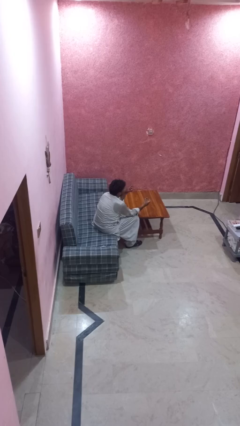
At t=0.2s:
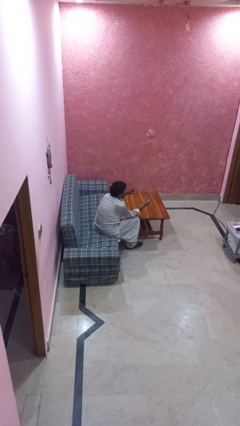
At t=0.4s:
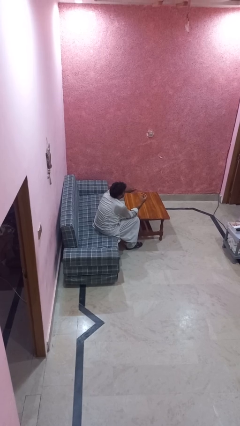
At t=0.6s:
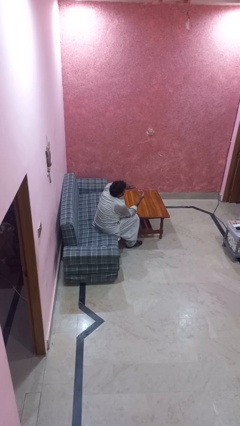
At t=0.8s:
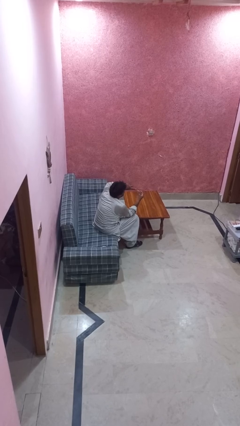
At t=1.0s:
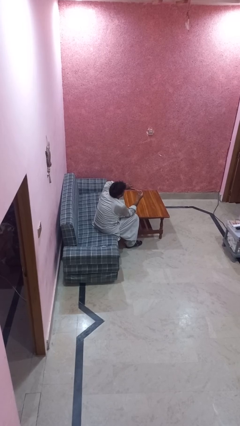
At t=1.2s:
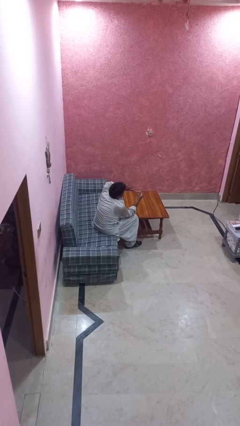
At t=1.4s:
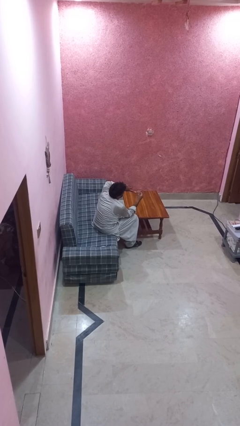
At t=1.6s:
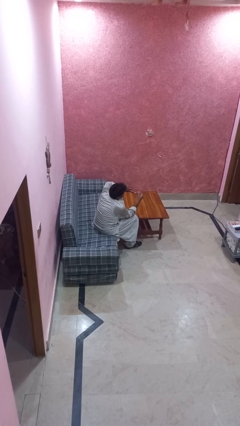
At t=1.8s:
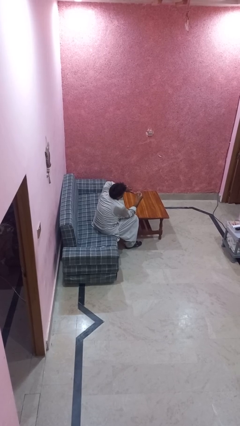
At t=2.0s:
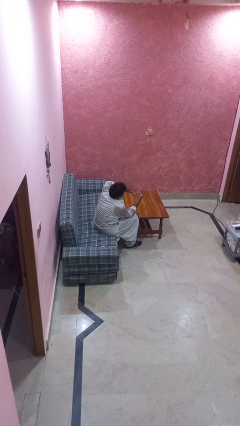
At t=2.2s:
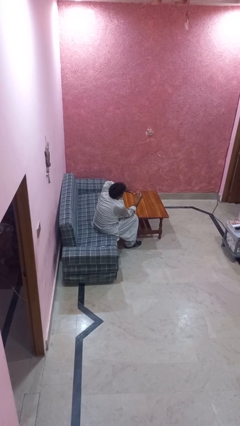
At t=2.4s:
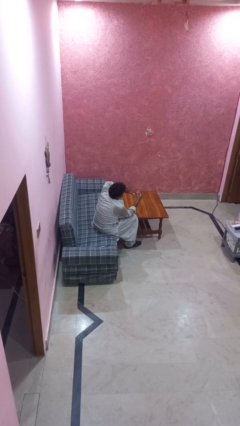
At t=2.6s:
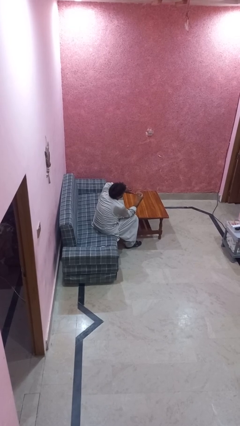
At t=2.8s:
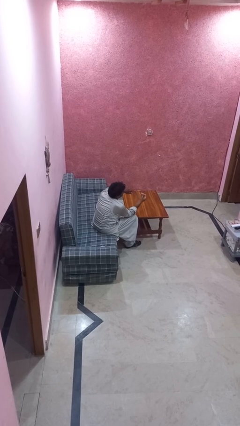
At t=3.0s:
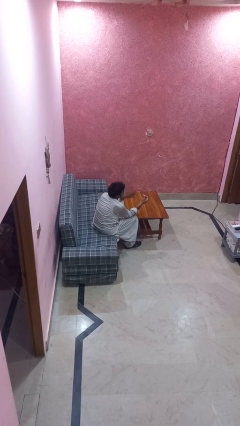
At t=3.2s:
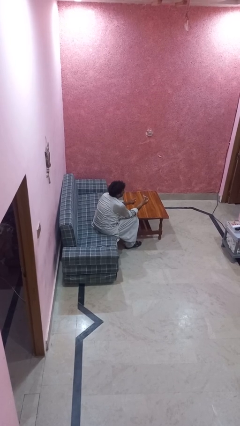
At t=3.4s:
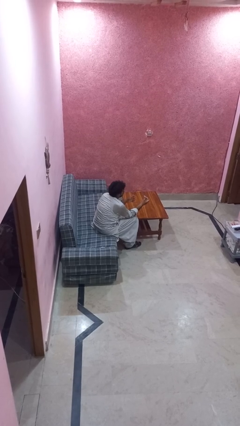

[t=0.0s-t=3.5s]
person clips fingernails

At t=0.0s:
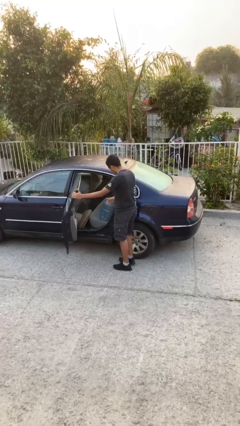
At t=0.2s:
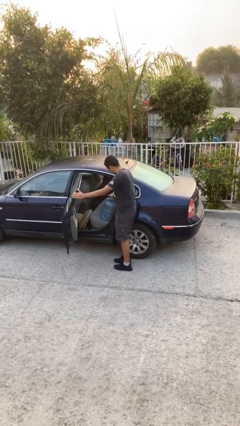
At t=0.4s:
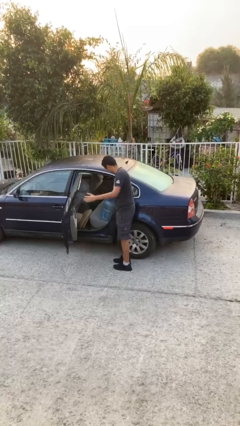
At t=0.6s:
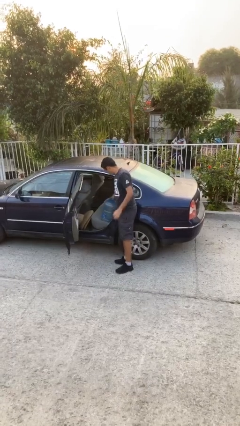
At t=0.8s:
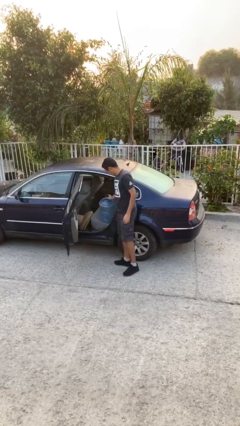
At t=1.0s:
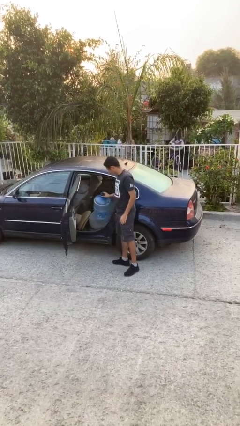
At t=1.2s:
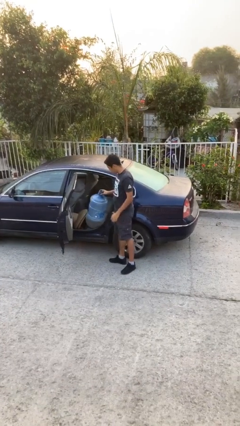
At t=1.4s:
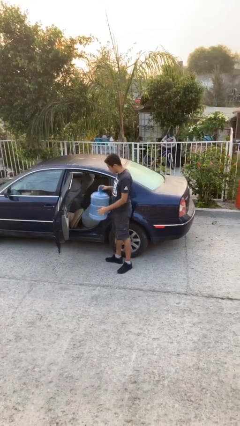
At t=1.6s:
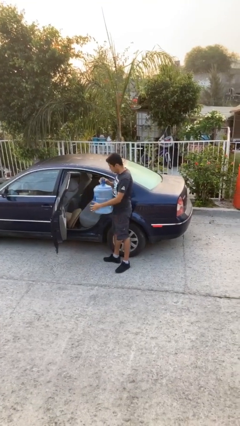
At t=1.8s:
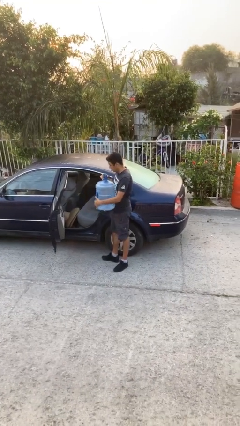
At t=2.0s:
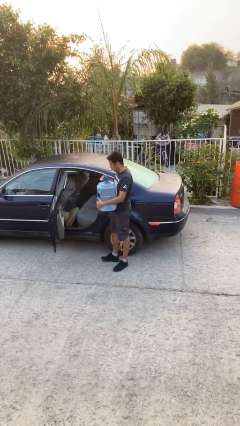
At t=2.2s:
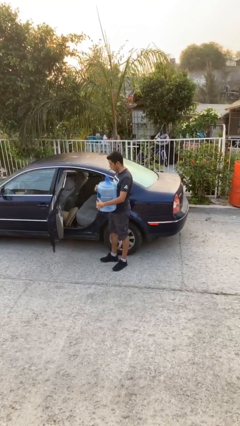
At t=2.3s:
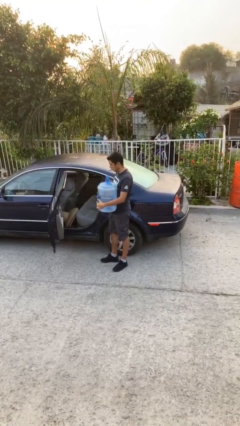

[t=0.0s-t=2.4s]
person unloads car

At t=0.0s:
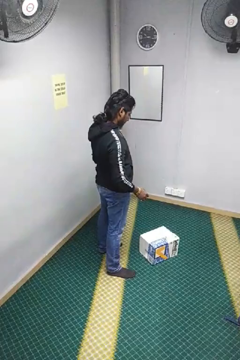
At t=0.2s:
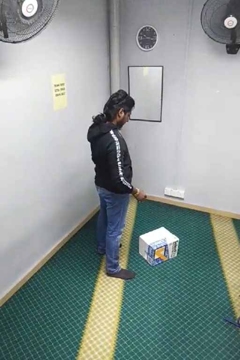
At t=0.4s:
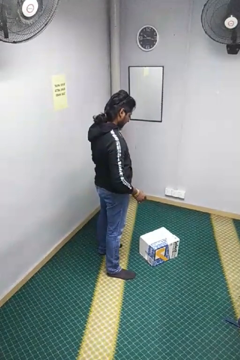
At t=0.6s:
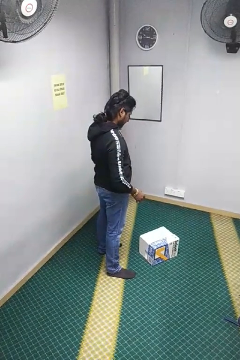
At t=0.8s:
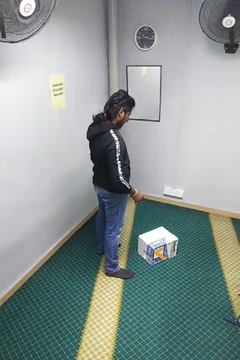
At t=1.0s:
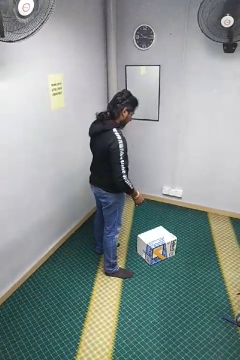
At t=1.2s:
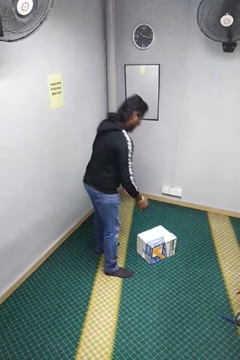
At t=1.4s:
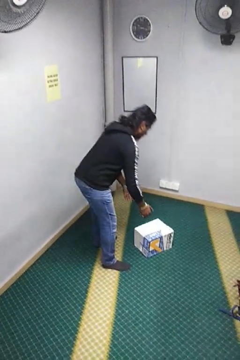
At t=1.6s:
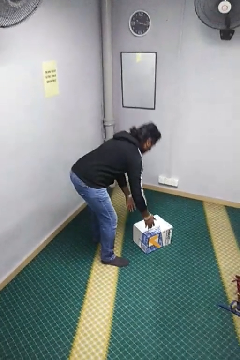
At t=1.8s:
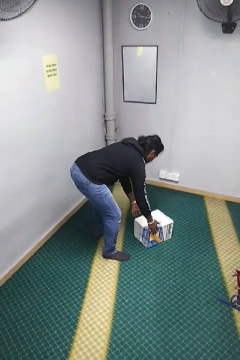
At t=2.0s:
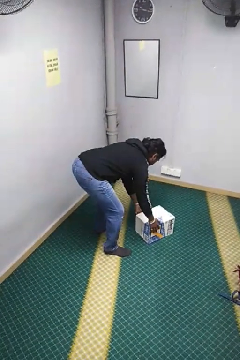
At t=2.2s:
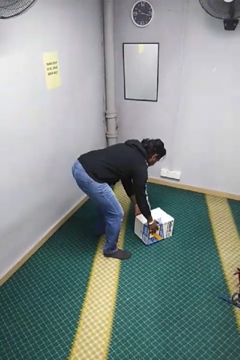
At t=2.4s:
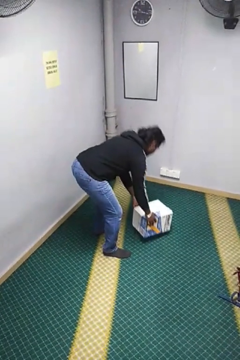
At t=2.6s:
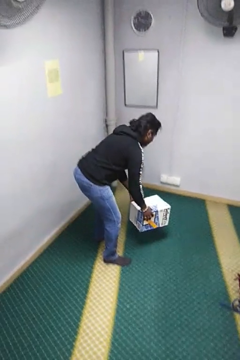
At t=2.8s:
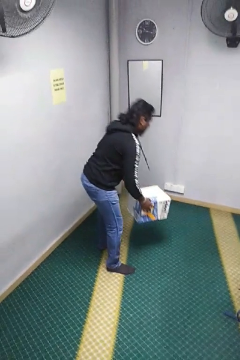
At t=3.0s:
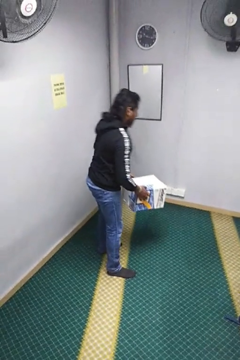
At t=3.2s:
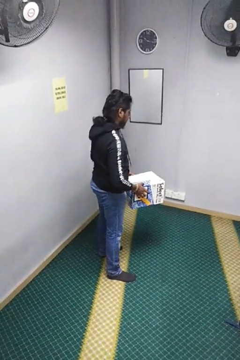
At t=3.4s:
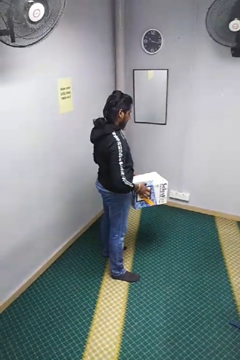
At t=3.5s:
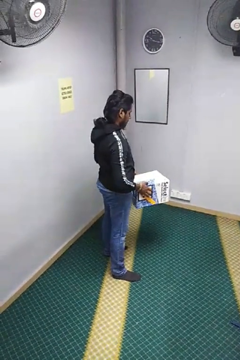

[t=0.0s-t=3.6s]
person picks up object from floor

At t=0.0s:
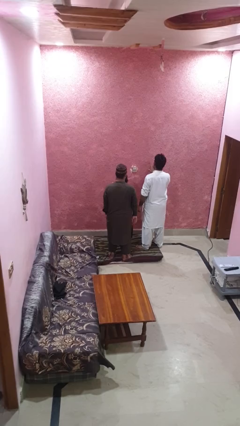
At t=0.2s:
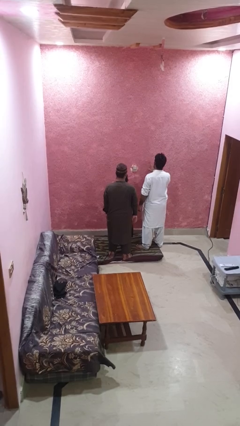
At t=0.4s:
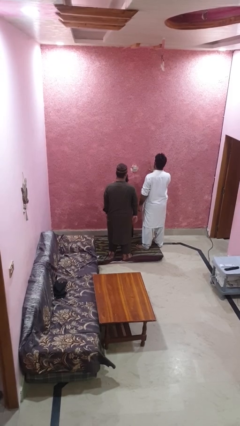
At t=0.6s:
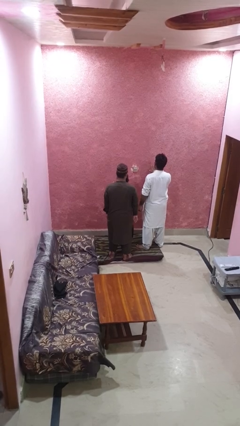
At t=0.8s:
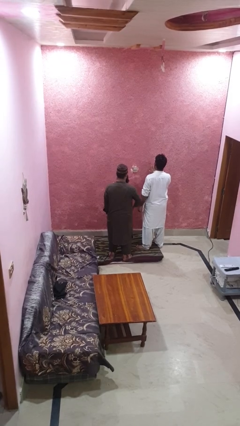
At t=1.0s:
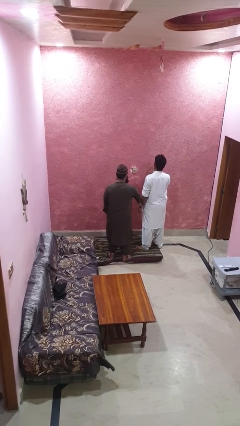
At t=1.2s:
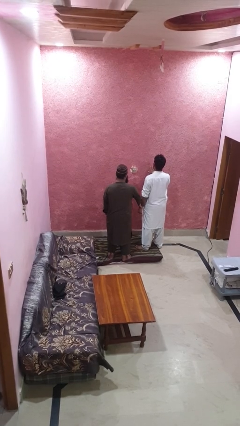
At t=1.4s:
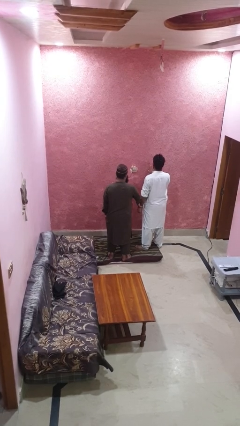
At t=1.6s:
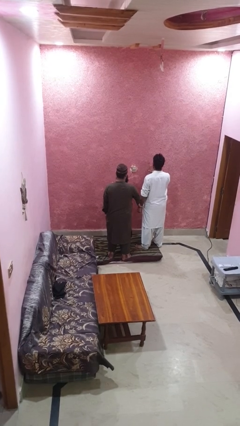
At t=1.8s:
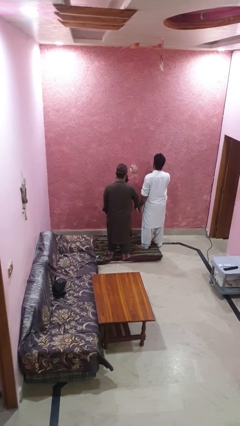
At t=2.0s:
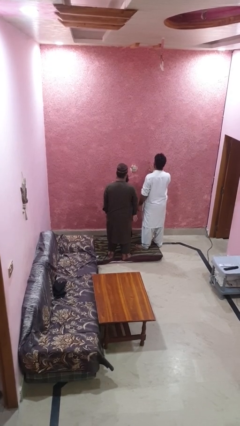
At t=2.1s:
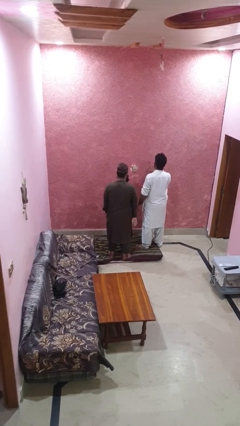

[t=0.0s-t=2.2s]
person grabs person by forearm

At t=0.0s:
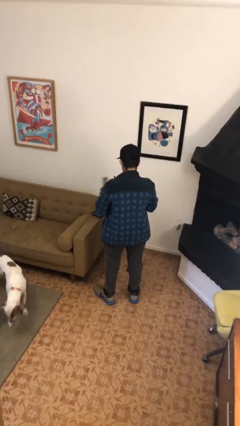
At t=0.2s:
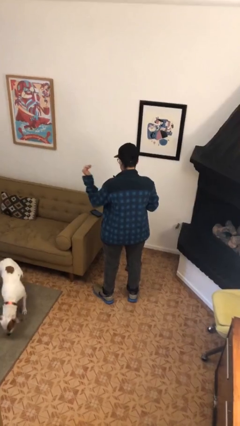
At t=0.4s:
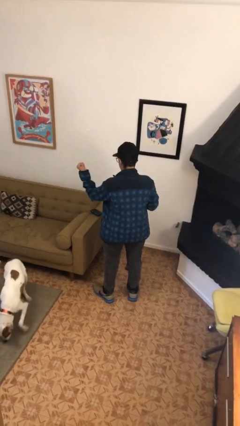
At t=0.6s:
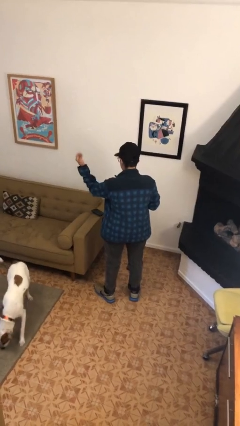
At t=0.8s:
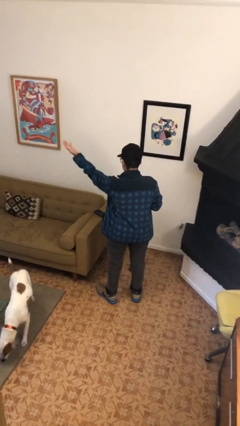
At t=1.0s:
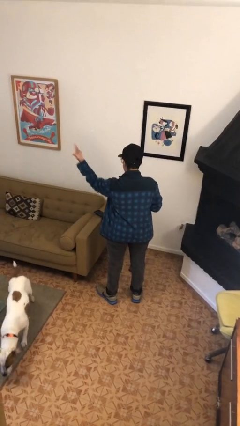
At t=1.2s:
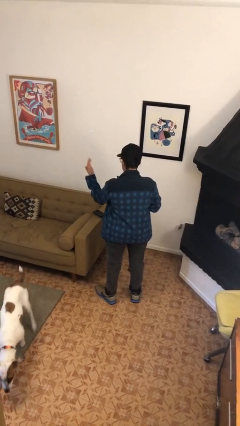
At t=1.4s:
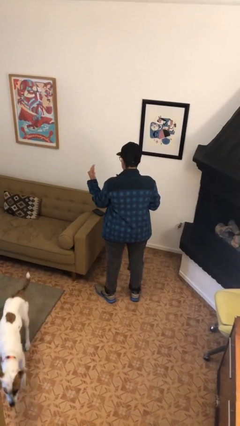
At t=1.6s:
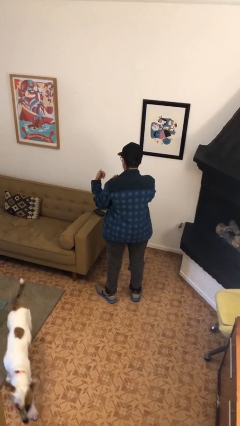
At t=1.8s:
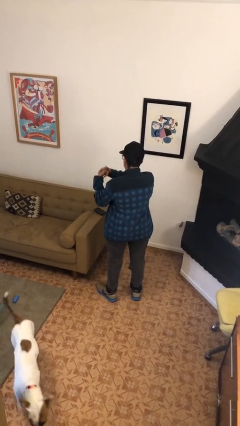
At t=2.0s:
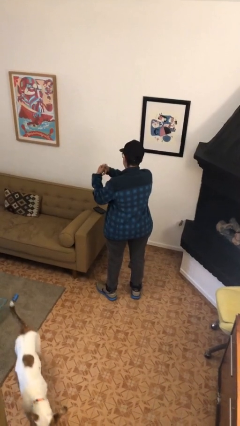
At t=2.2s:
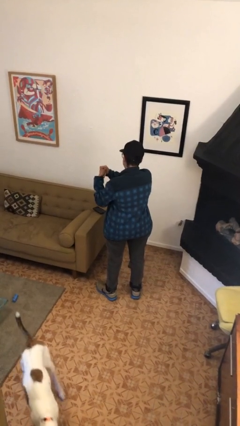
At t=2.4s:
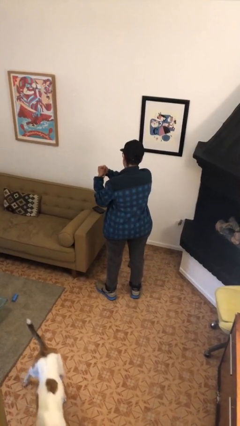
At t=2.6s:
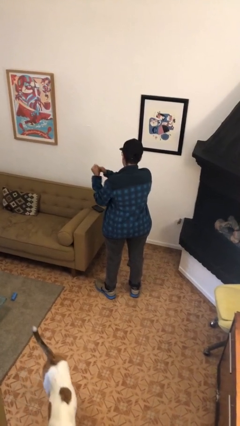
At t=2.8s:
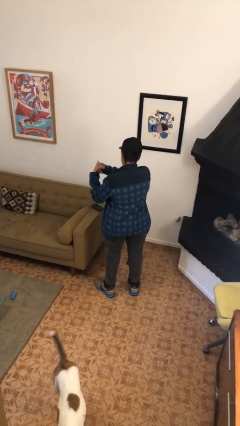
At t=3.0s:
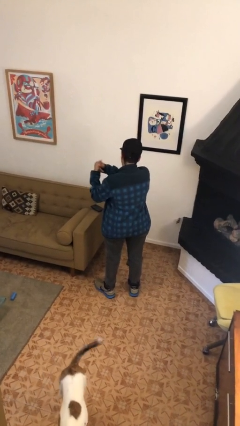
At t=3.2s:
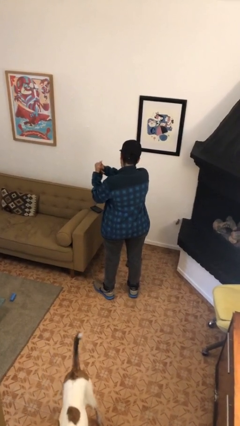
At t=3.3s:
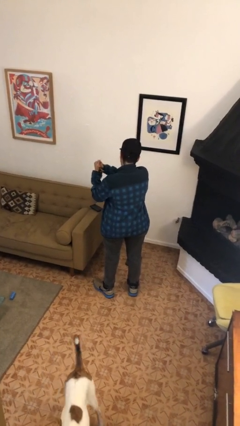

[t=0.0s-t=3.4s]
person cracks knuckles

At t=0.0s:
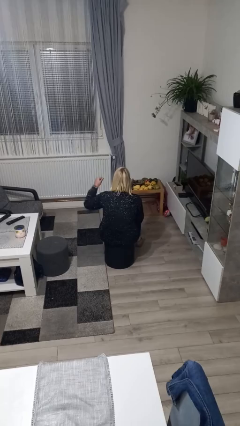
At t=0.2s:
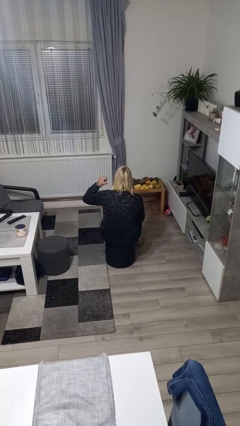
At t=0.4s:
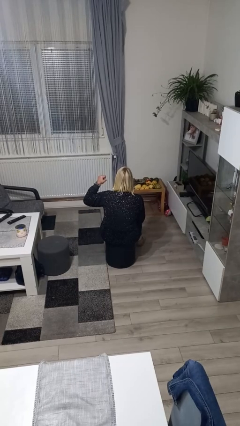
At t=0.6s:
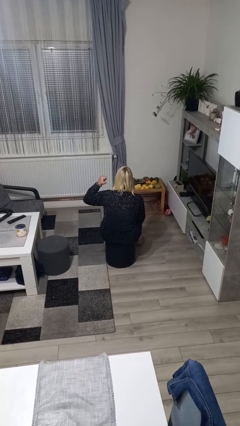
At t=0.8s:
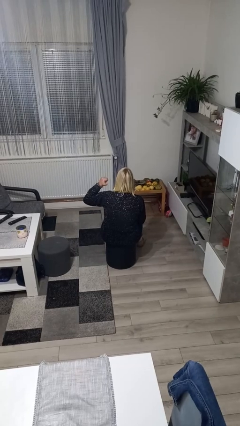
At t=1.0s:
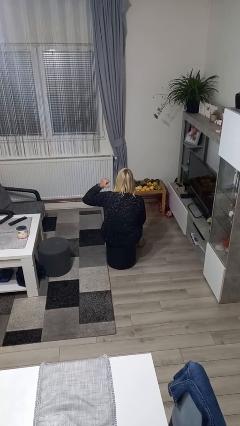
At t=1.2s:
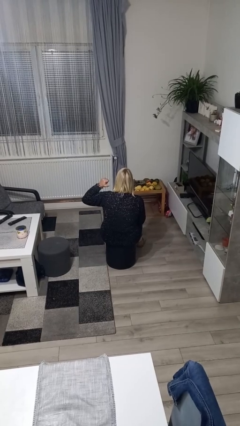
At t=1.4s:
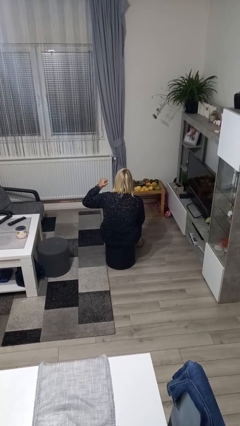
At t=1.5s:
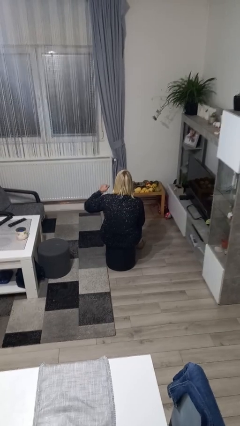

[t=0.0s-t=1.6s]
person gestures behind me

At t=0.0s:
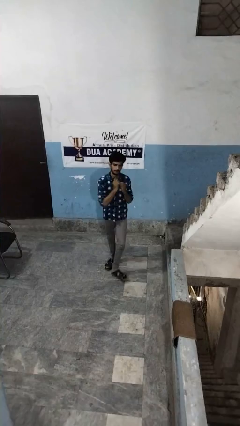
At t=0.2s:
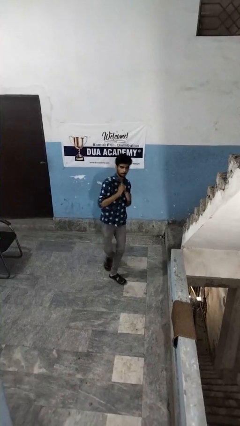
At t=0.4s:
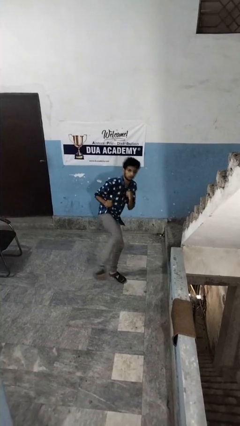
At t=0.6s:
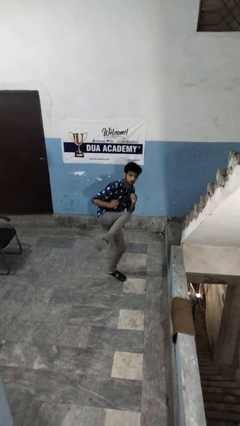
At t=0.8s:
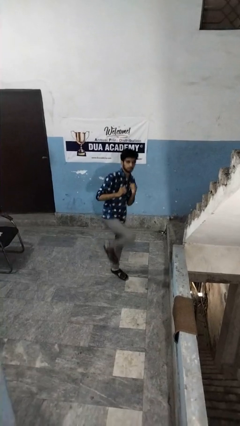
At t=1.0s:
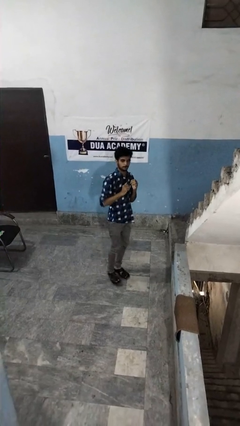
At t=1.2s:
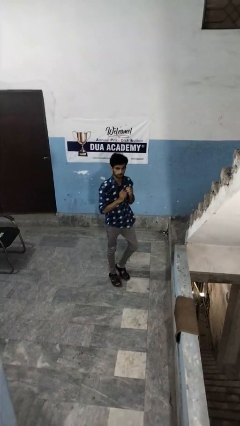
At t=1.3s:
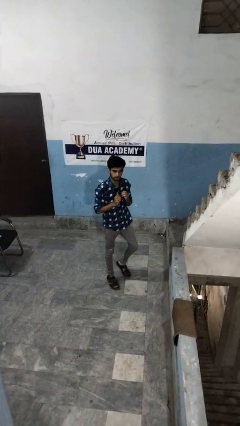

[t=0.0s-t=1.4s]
person karate kicks
